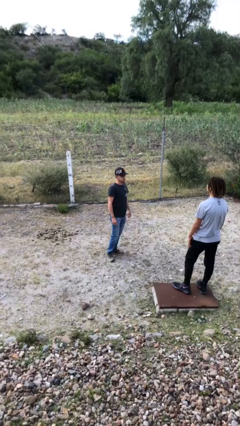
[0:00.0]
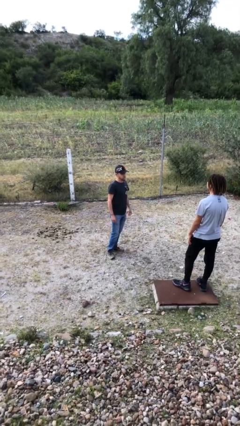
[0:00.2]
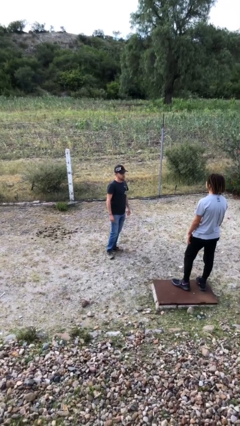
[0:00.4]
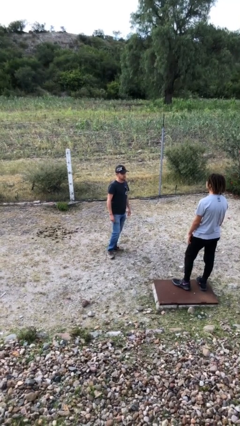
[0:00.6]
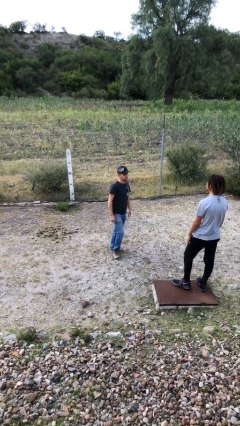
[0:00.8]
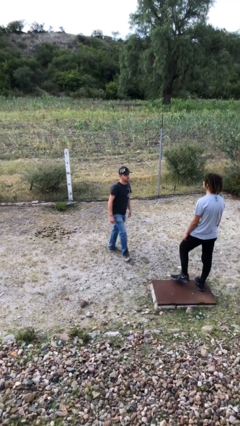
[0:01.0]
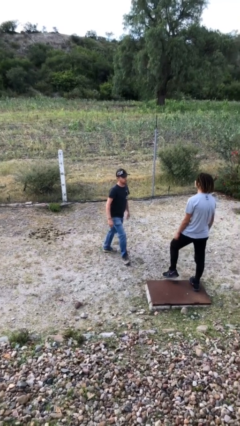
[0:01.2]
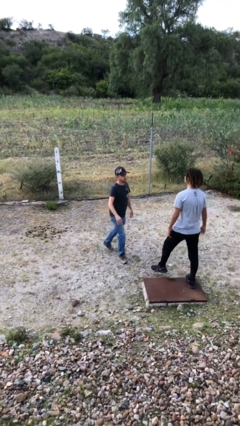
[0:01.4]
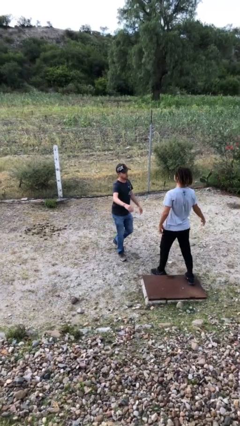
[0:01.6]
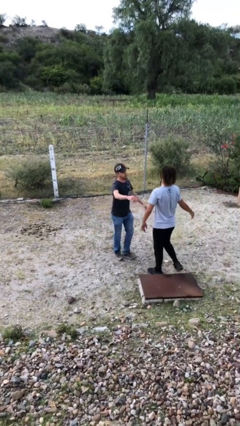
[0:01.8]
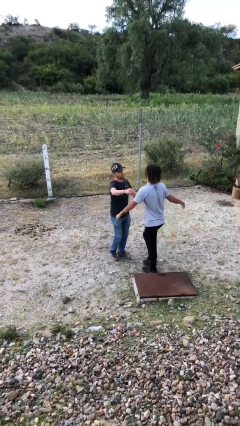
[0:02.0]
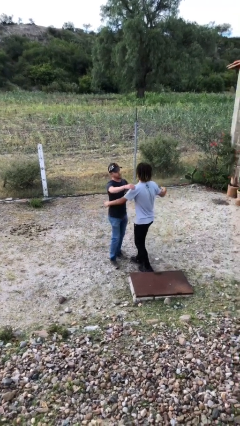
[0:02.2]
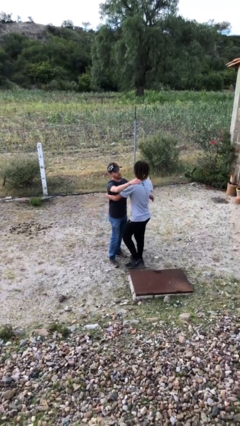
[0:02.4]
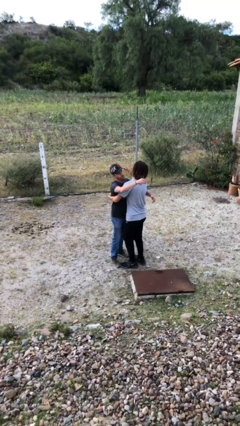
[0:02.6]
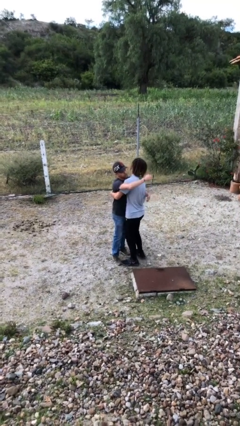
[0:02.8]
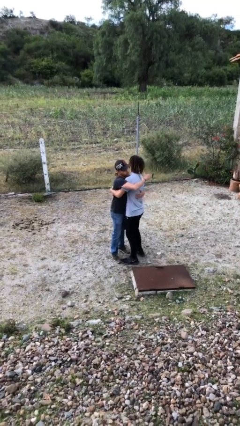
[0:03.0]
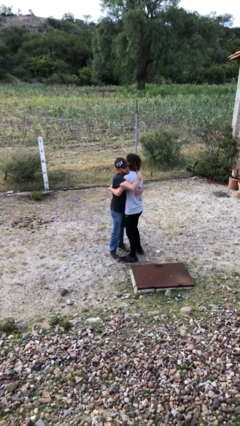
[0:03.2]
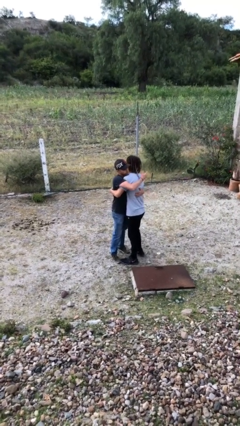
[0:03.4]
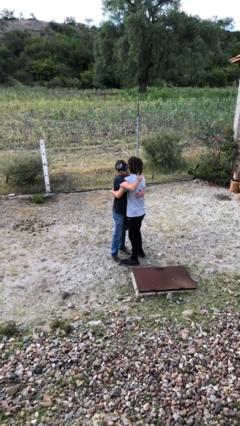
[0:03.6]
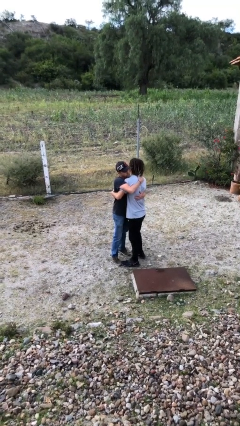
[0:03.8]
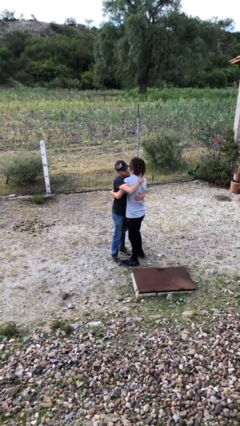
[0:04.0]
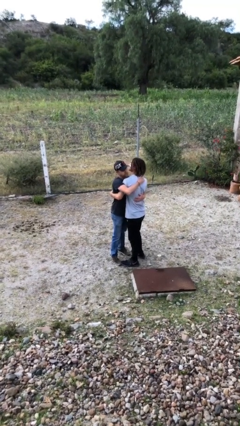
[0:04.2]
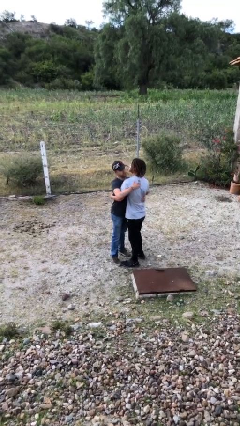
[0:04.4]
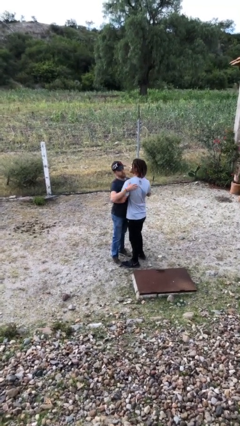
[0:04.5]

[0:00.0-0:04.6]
person embraces person

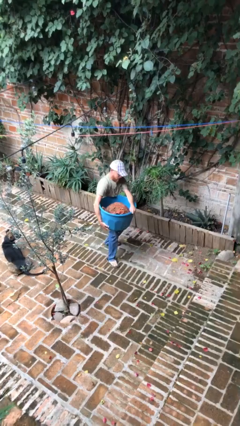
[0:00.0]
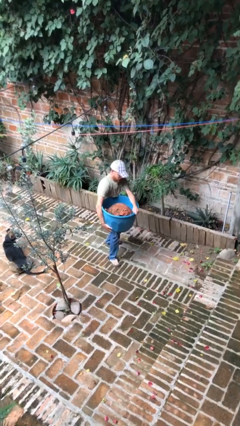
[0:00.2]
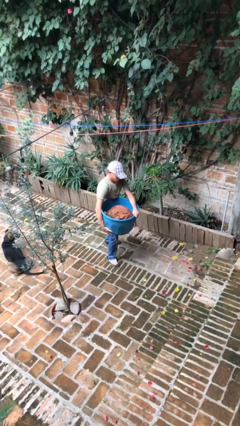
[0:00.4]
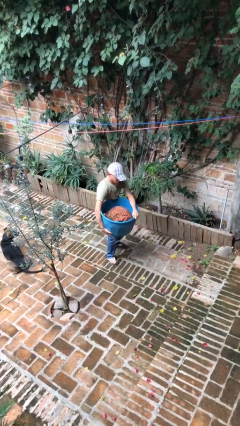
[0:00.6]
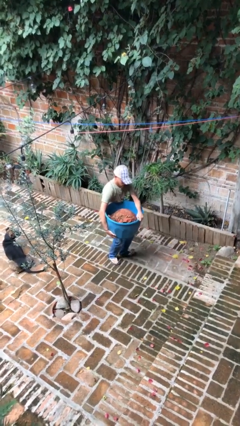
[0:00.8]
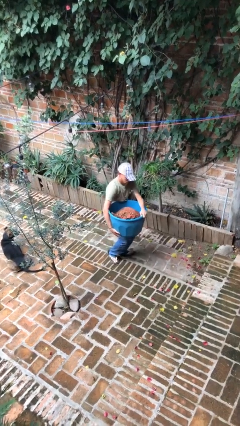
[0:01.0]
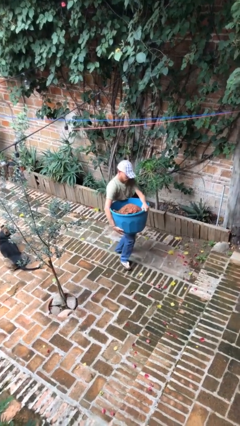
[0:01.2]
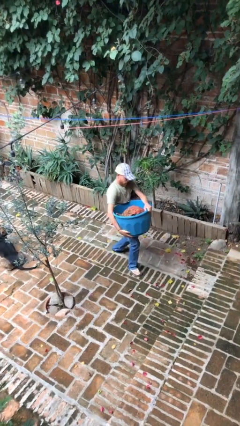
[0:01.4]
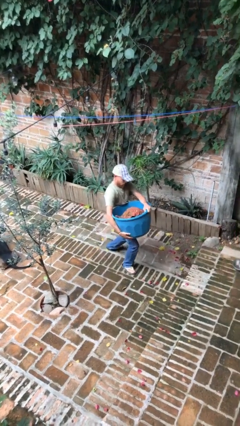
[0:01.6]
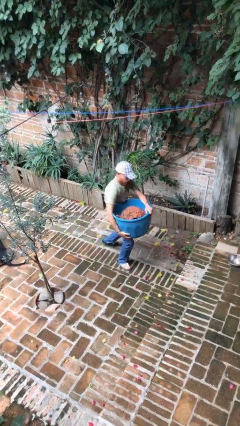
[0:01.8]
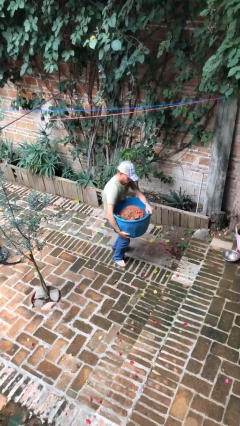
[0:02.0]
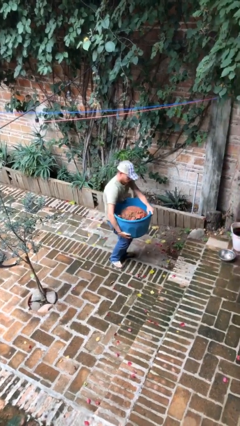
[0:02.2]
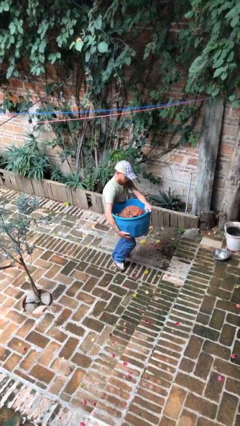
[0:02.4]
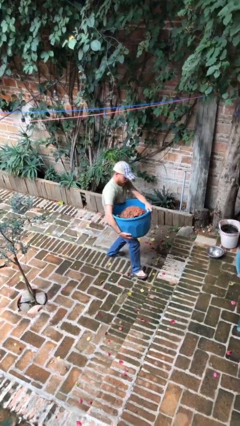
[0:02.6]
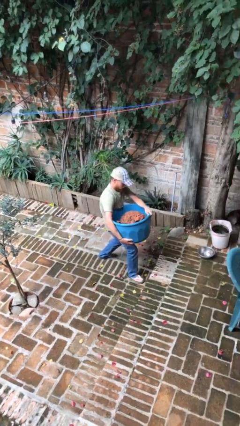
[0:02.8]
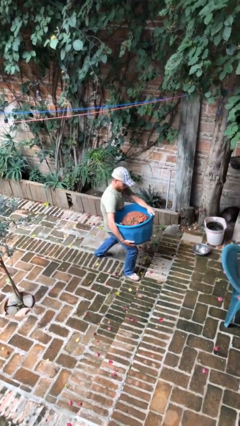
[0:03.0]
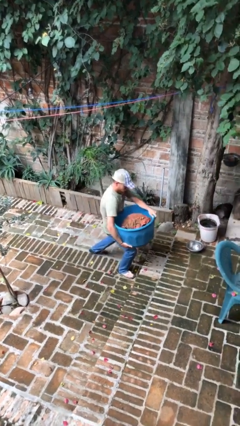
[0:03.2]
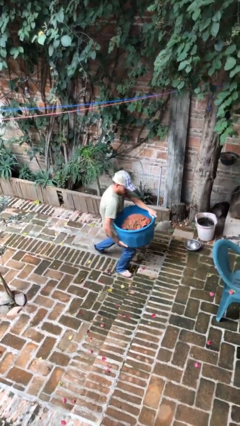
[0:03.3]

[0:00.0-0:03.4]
person carries heavy object

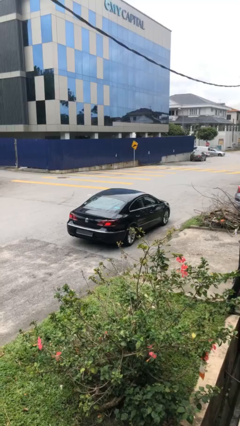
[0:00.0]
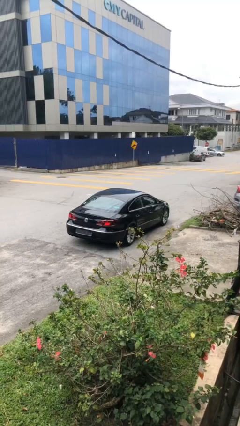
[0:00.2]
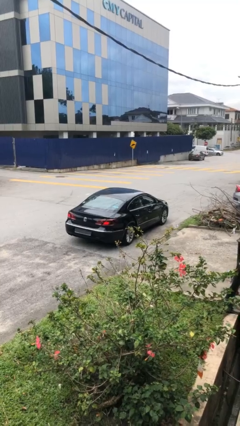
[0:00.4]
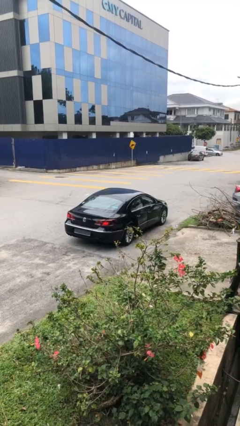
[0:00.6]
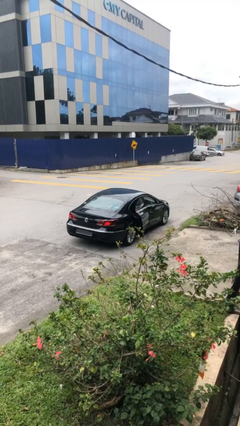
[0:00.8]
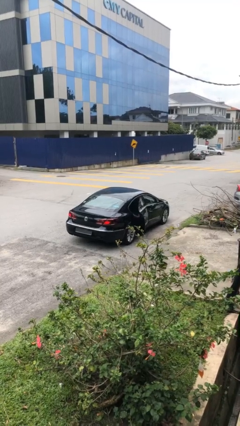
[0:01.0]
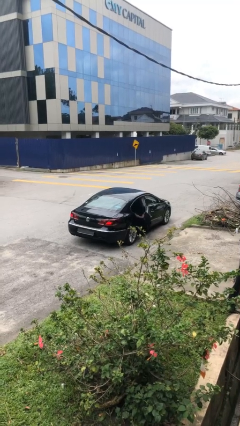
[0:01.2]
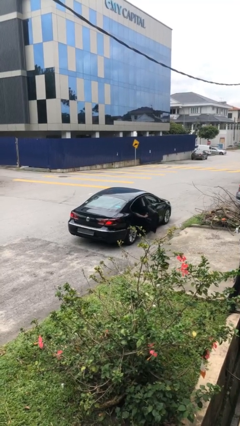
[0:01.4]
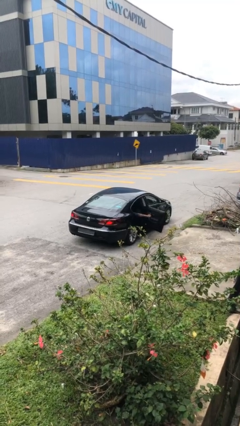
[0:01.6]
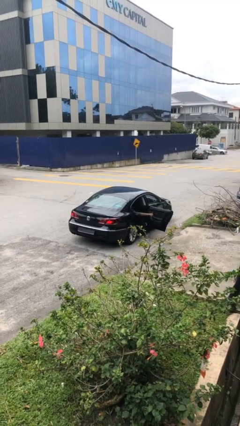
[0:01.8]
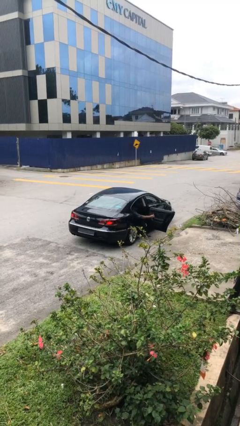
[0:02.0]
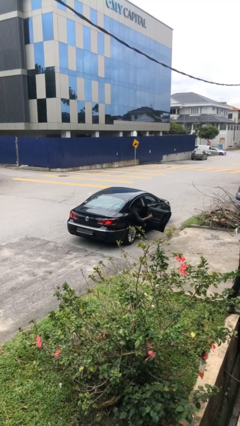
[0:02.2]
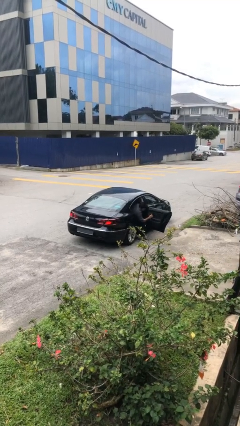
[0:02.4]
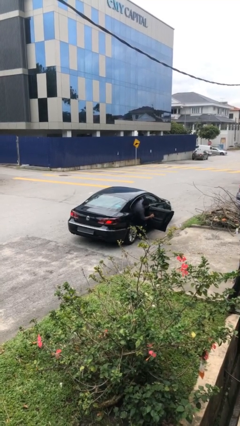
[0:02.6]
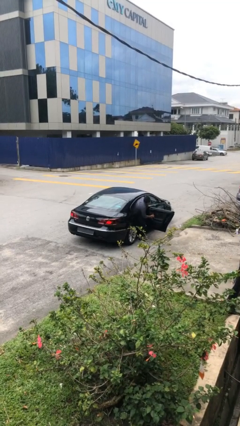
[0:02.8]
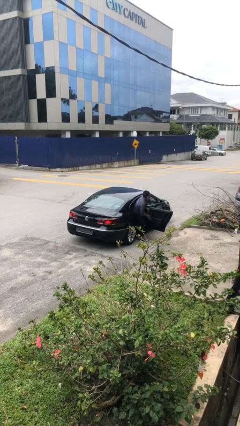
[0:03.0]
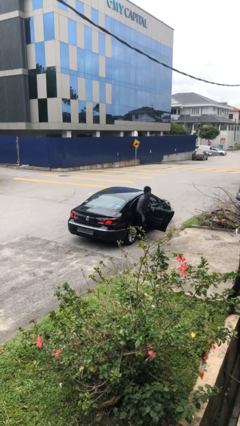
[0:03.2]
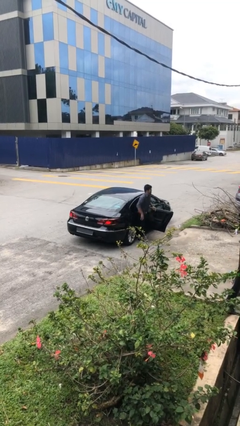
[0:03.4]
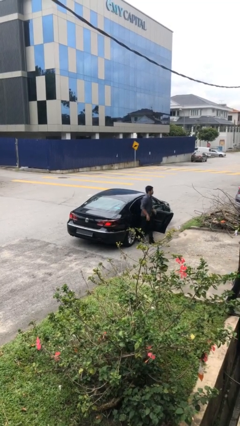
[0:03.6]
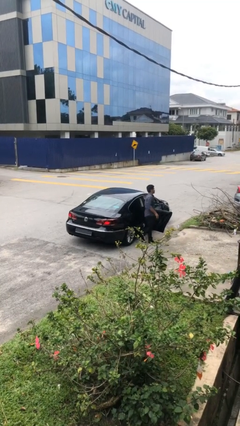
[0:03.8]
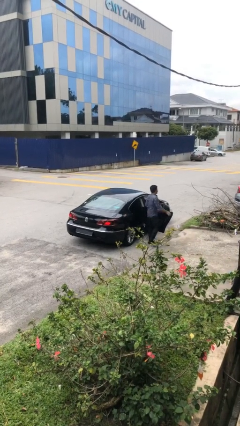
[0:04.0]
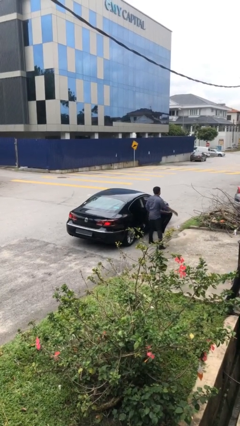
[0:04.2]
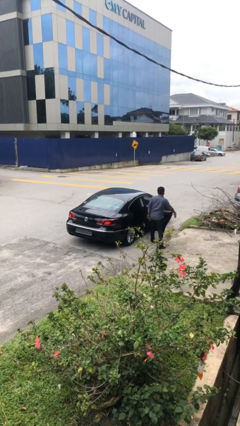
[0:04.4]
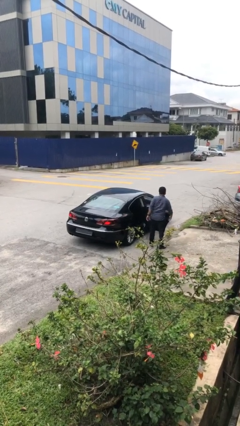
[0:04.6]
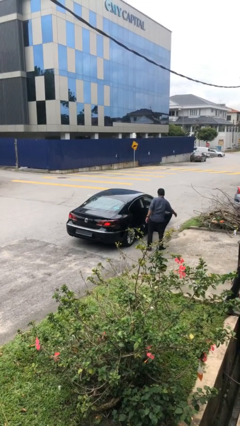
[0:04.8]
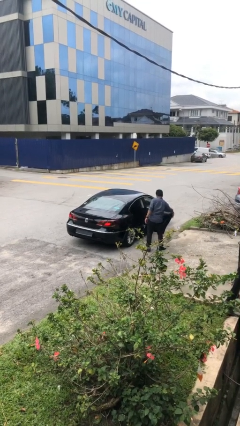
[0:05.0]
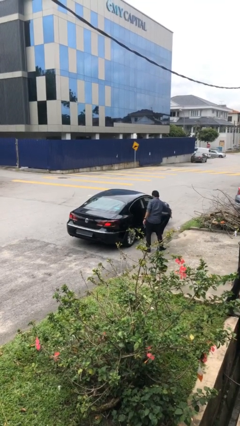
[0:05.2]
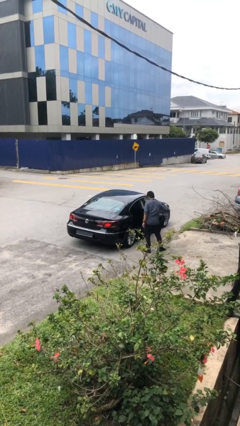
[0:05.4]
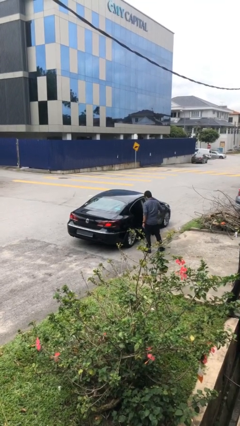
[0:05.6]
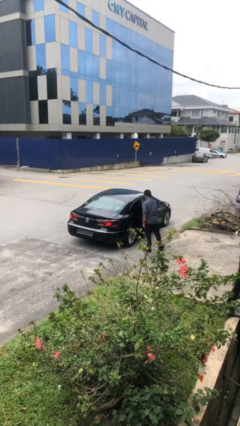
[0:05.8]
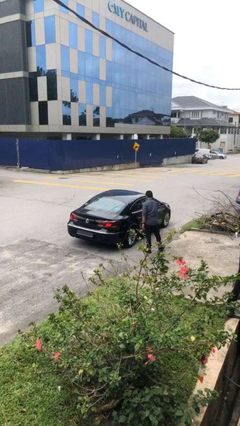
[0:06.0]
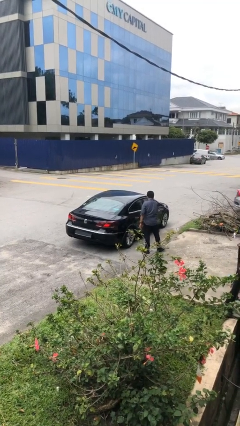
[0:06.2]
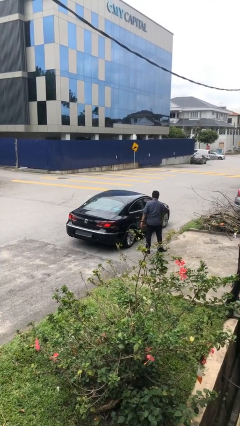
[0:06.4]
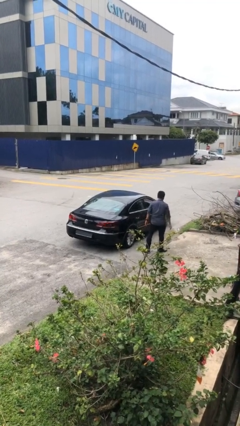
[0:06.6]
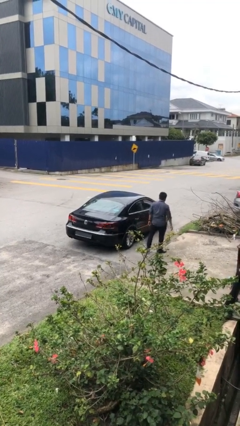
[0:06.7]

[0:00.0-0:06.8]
car drops off person

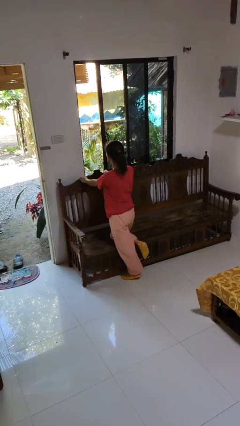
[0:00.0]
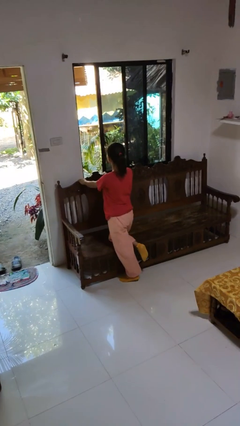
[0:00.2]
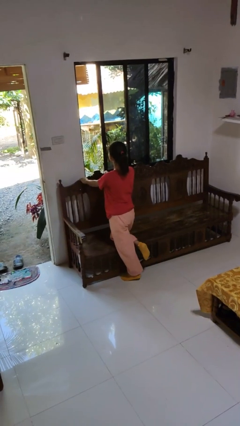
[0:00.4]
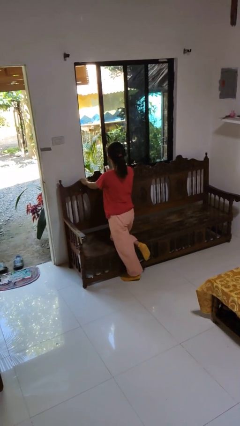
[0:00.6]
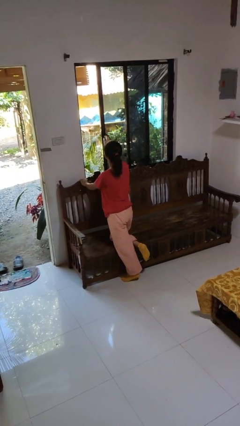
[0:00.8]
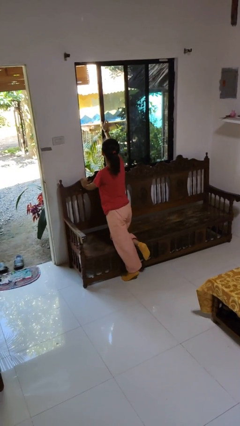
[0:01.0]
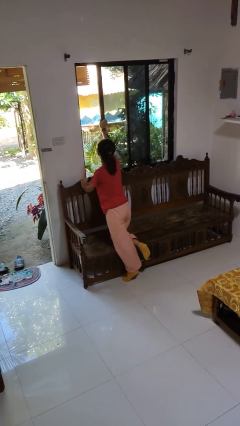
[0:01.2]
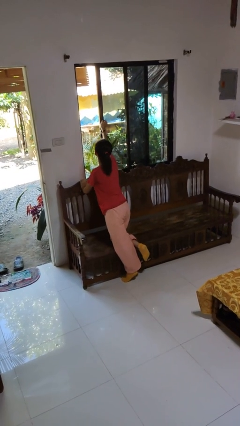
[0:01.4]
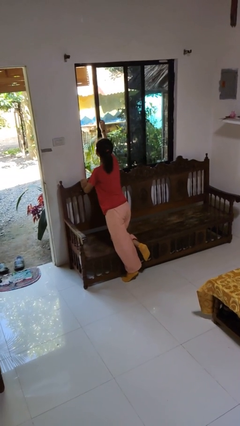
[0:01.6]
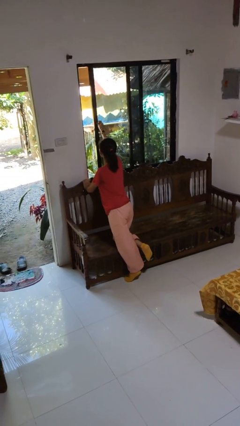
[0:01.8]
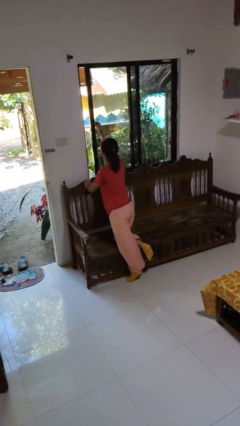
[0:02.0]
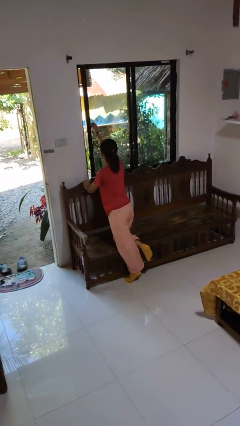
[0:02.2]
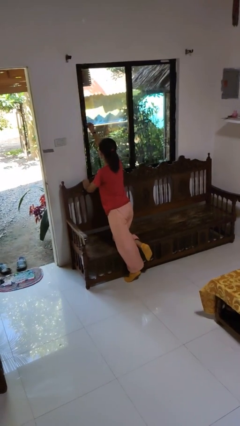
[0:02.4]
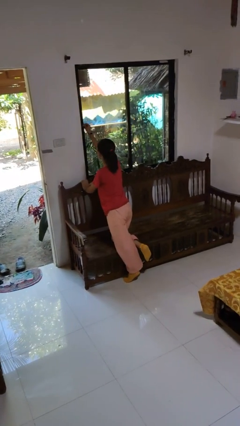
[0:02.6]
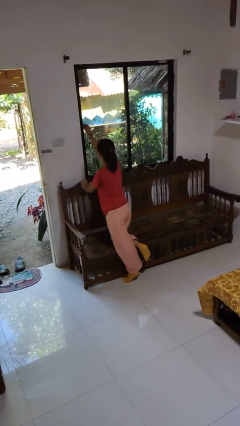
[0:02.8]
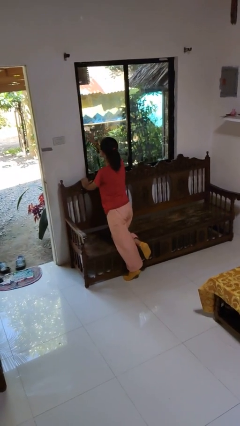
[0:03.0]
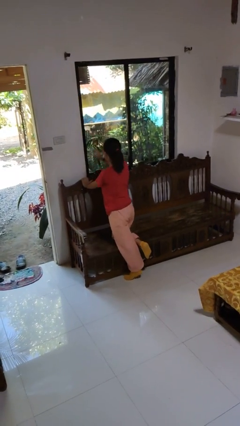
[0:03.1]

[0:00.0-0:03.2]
person closes home window

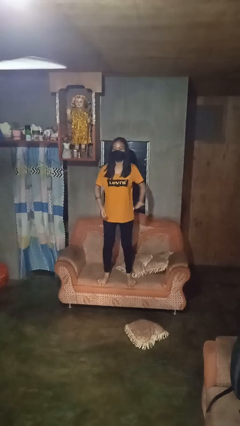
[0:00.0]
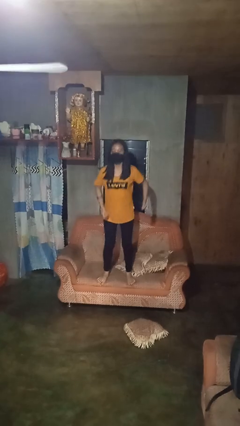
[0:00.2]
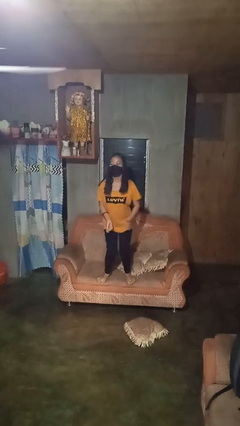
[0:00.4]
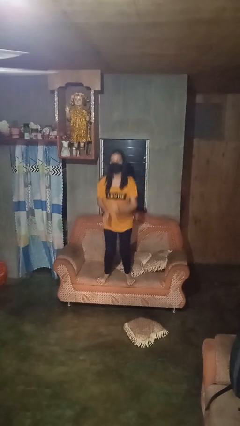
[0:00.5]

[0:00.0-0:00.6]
person jumps on couch
